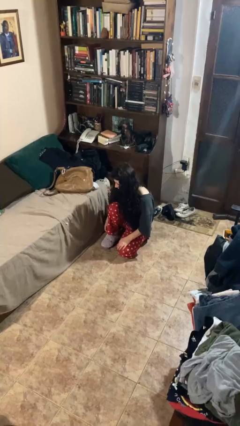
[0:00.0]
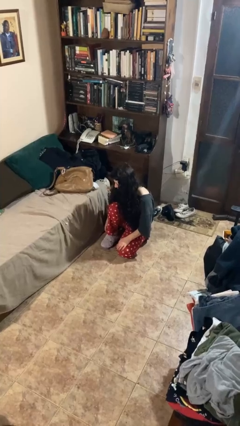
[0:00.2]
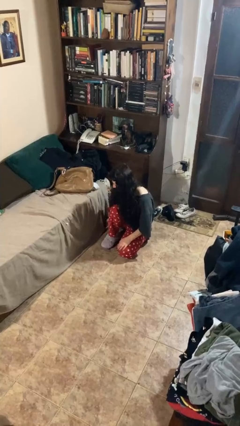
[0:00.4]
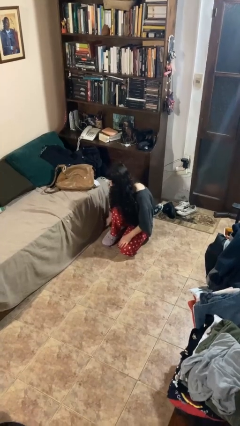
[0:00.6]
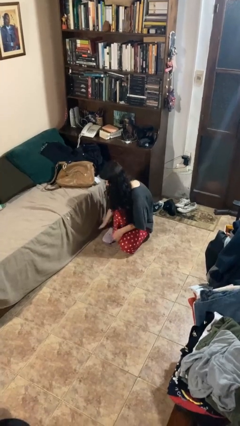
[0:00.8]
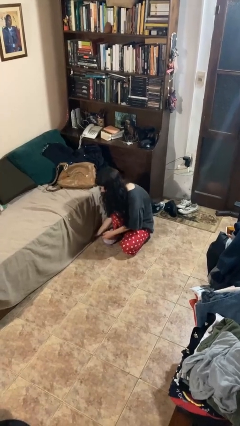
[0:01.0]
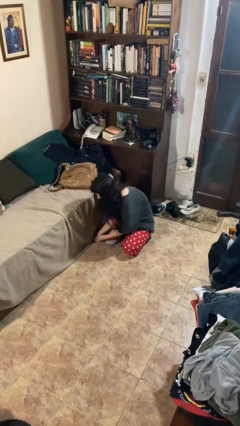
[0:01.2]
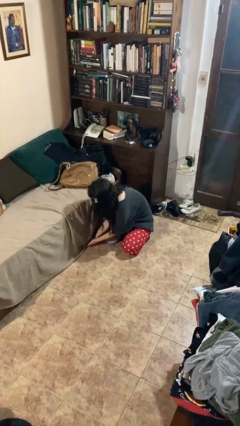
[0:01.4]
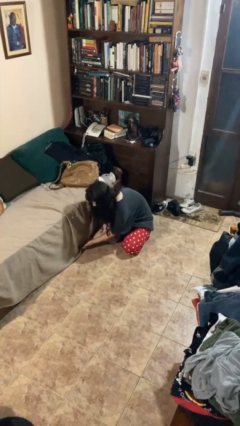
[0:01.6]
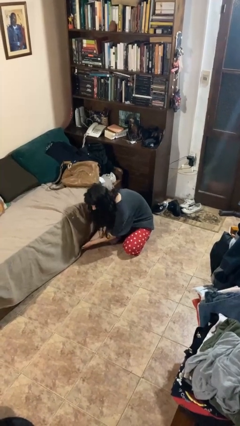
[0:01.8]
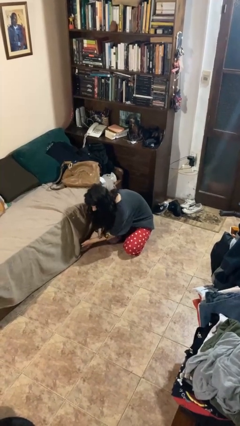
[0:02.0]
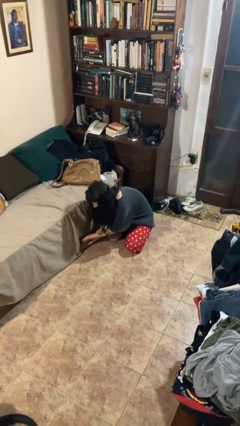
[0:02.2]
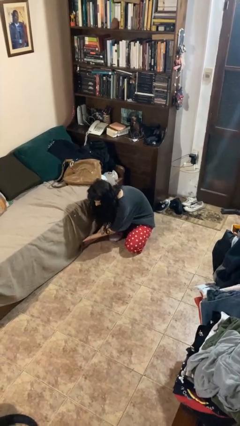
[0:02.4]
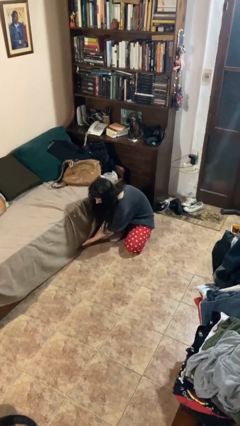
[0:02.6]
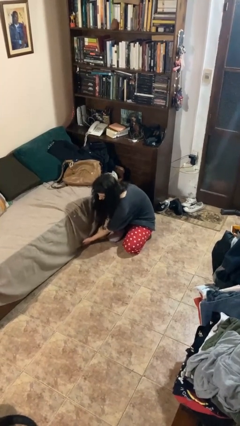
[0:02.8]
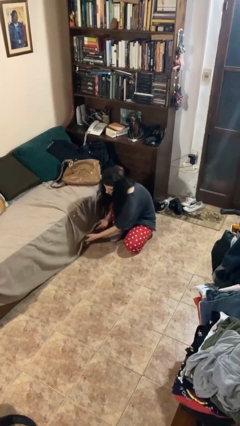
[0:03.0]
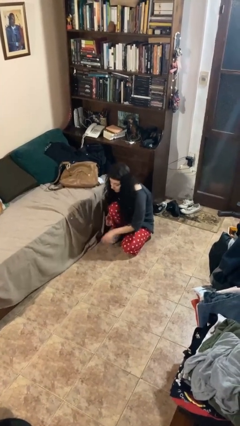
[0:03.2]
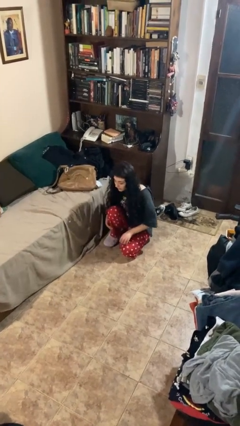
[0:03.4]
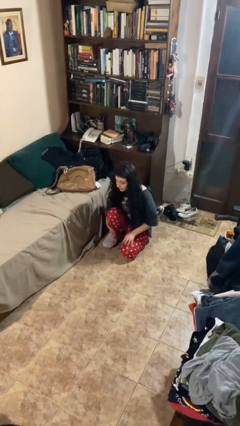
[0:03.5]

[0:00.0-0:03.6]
person searches under couch

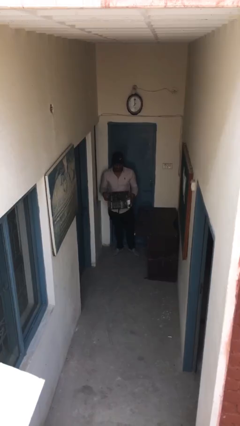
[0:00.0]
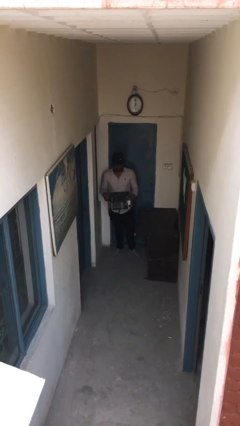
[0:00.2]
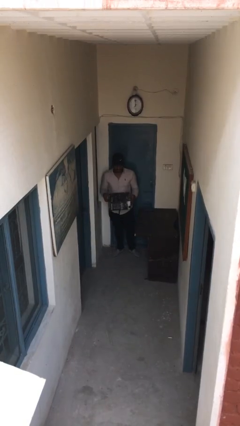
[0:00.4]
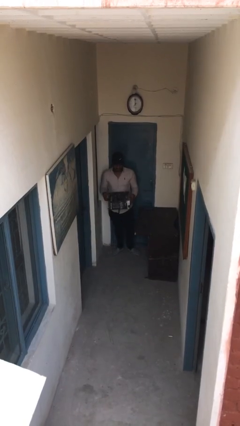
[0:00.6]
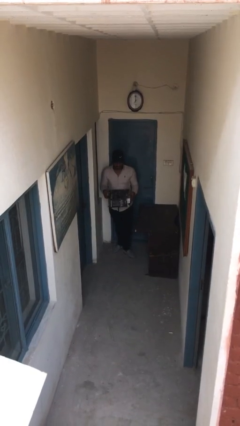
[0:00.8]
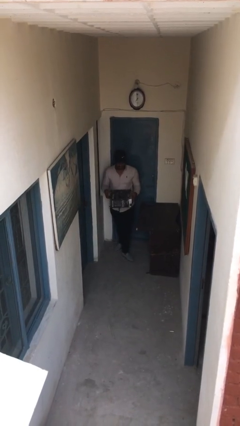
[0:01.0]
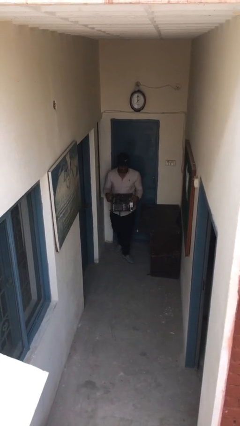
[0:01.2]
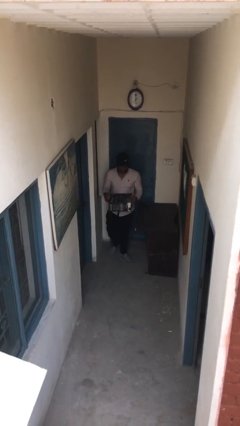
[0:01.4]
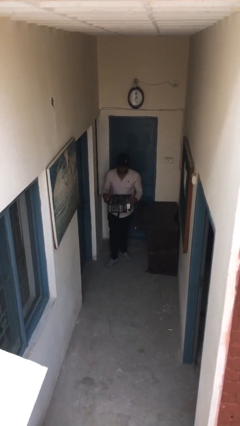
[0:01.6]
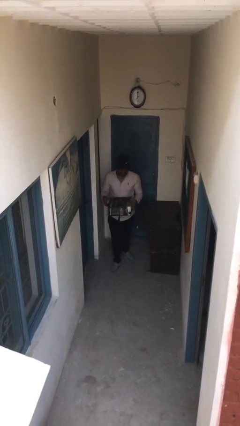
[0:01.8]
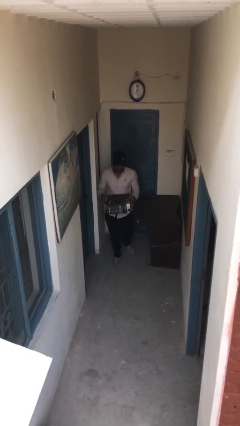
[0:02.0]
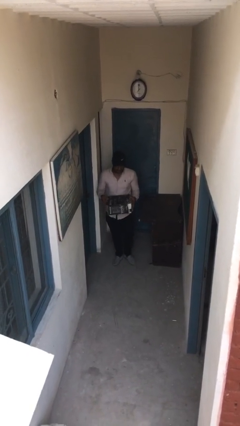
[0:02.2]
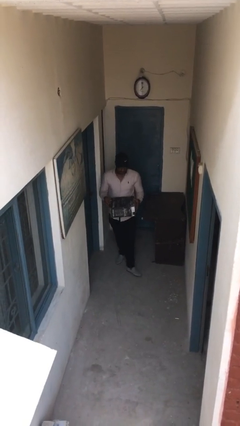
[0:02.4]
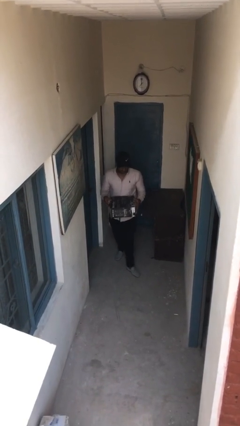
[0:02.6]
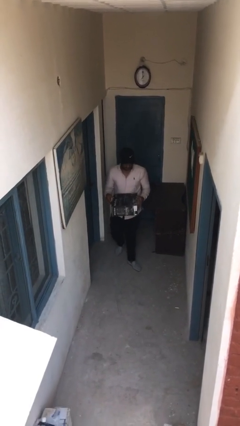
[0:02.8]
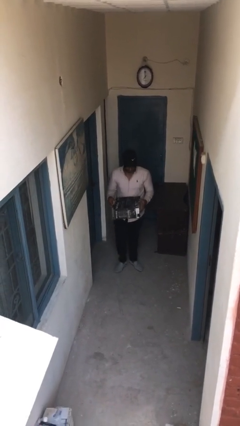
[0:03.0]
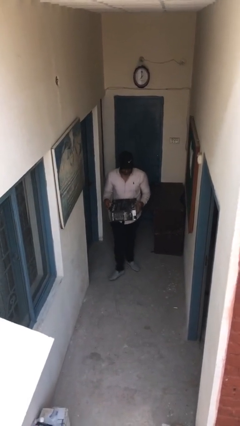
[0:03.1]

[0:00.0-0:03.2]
person carries heavy object

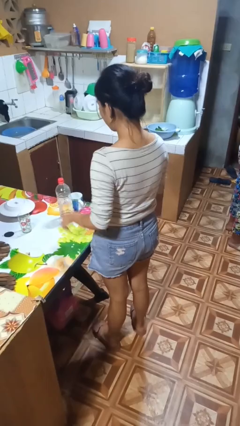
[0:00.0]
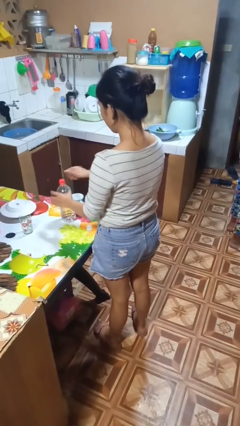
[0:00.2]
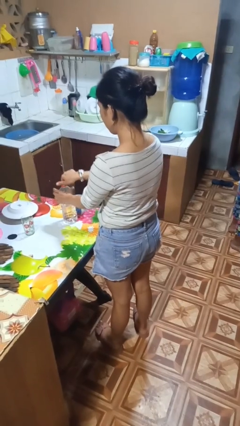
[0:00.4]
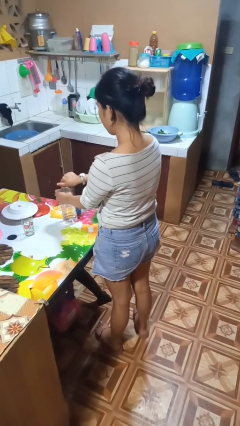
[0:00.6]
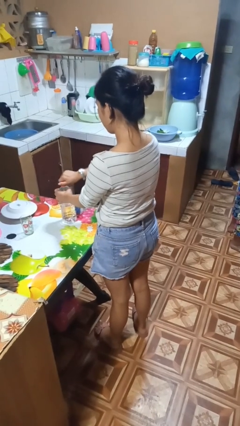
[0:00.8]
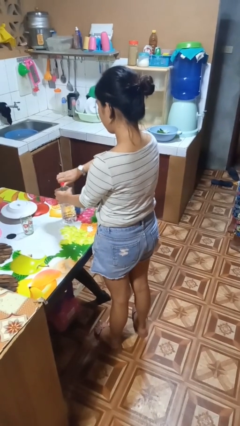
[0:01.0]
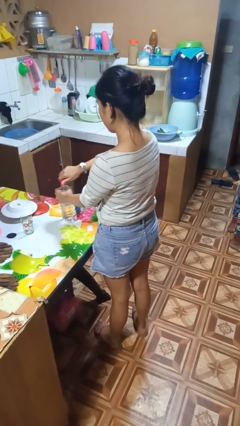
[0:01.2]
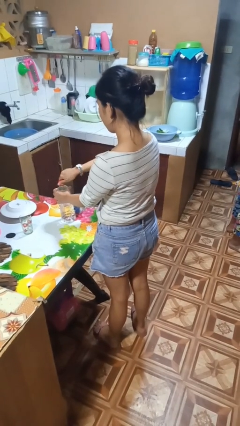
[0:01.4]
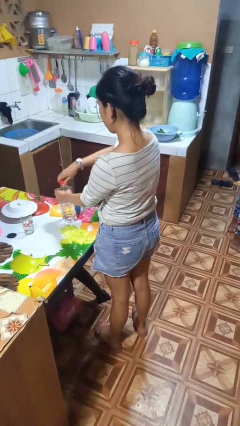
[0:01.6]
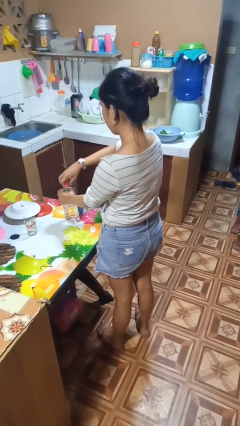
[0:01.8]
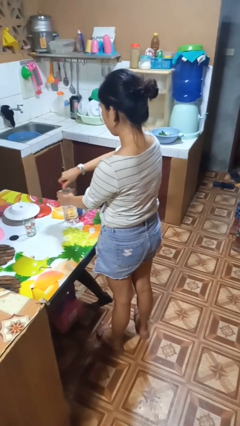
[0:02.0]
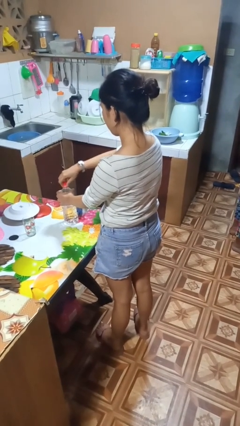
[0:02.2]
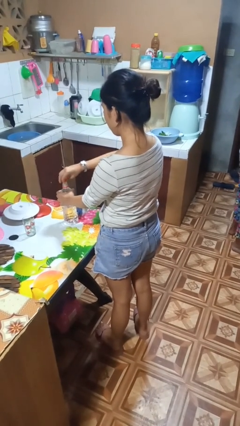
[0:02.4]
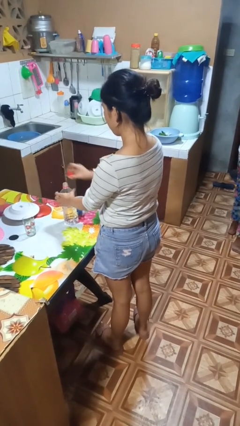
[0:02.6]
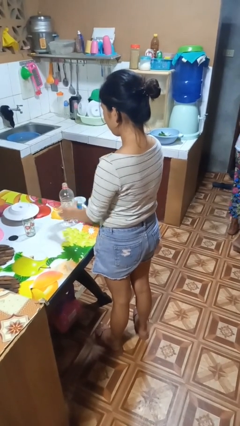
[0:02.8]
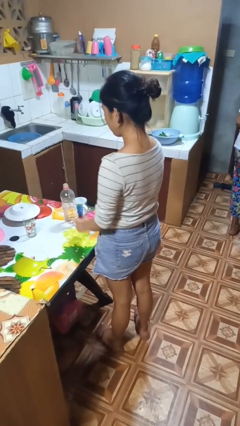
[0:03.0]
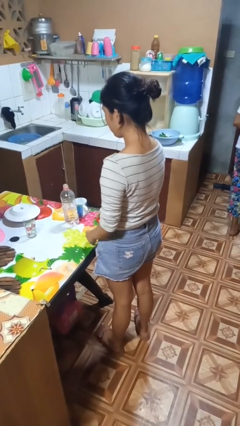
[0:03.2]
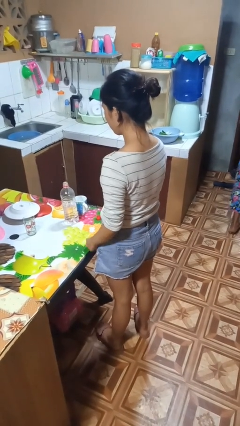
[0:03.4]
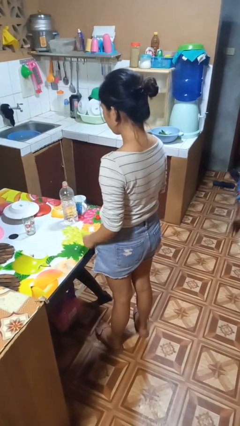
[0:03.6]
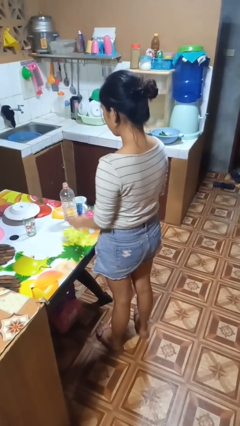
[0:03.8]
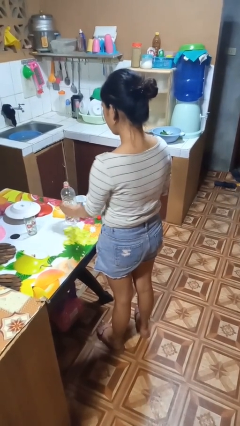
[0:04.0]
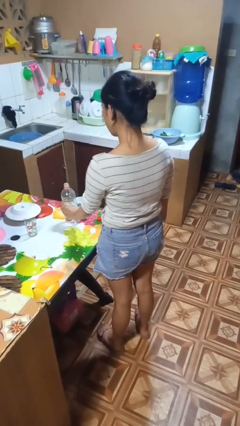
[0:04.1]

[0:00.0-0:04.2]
person unscrews lid from bottle

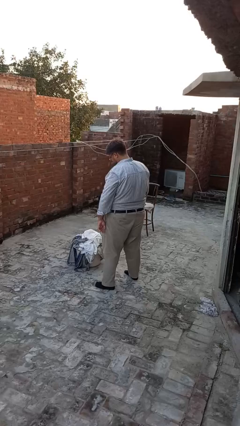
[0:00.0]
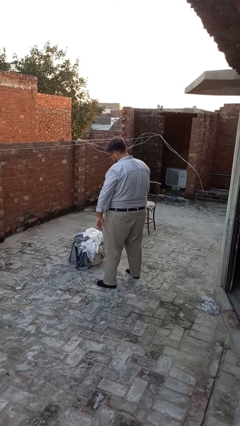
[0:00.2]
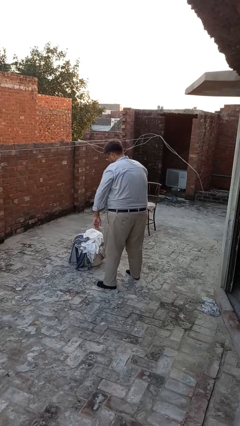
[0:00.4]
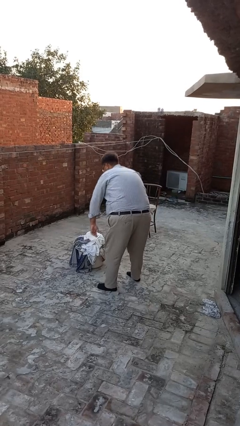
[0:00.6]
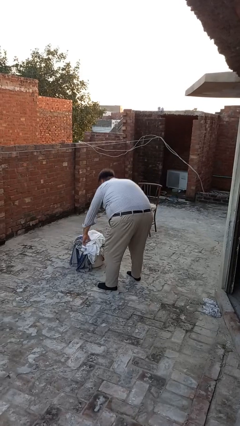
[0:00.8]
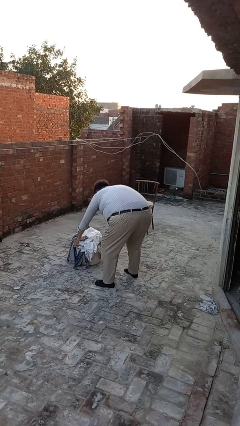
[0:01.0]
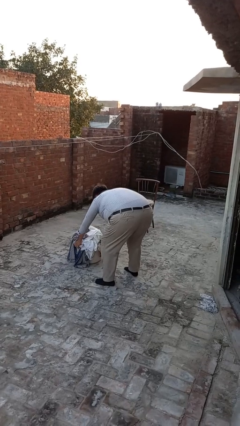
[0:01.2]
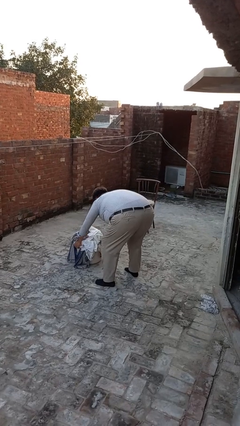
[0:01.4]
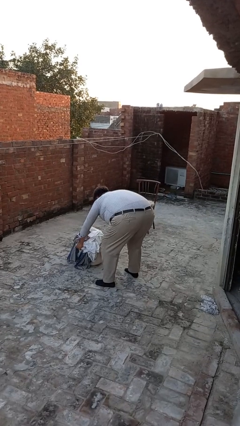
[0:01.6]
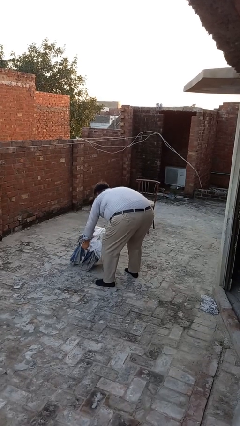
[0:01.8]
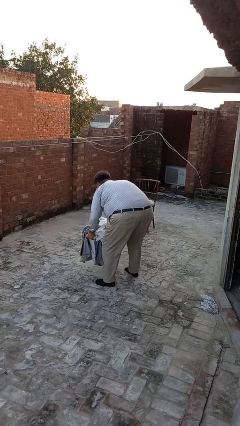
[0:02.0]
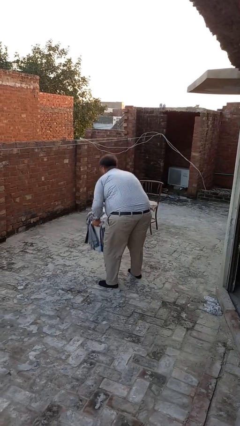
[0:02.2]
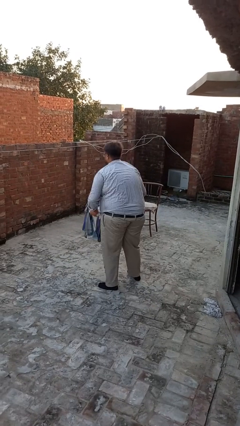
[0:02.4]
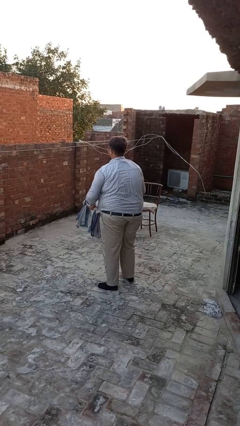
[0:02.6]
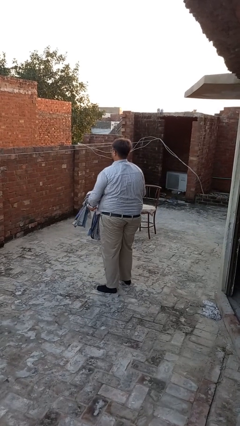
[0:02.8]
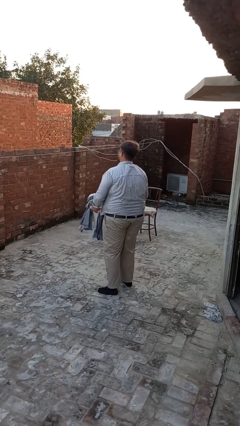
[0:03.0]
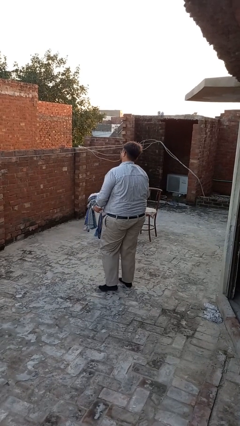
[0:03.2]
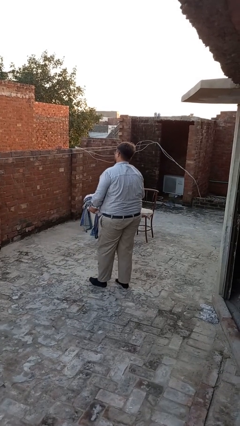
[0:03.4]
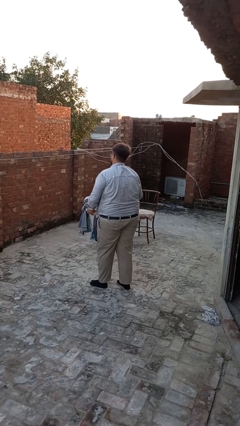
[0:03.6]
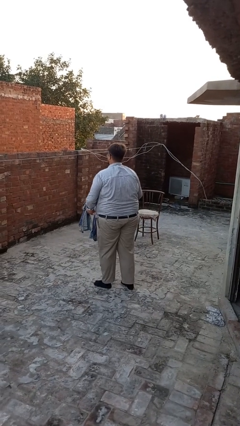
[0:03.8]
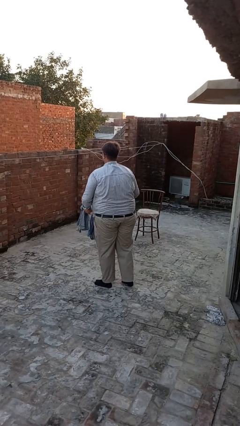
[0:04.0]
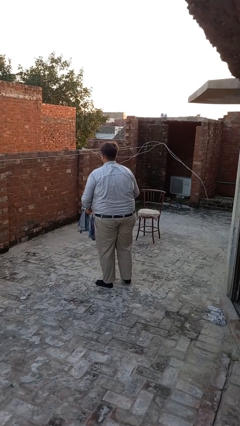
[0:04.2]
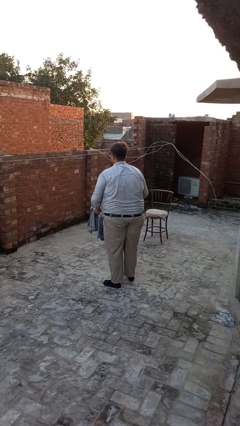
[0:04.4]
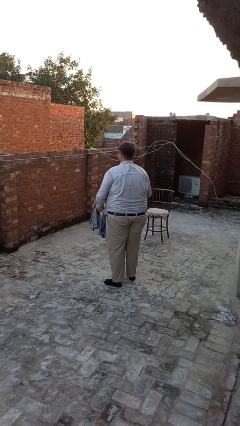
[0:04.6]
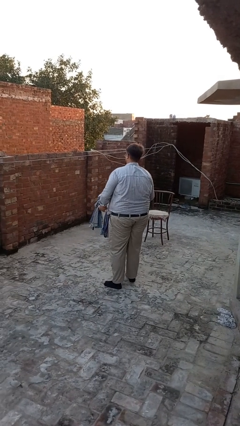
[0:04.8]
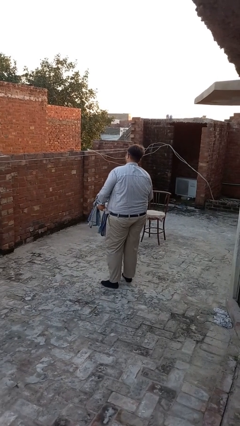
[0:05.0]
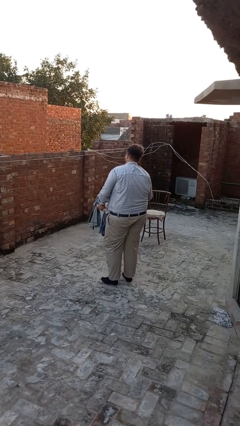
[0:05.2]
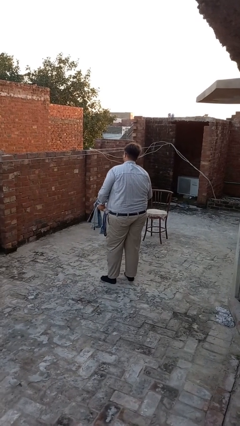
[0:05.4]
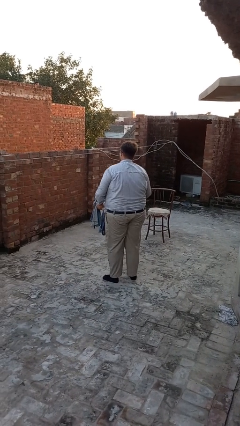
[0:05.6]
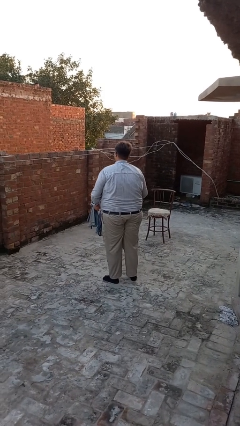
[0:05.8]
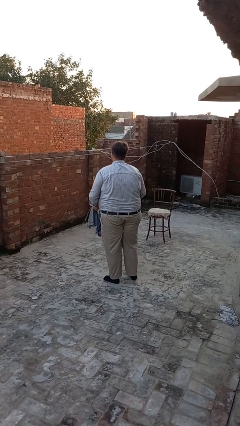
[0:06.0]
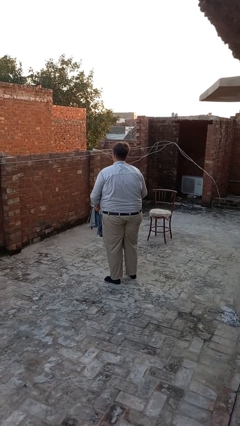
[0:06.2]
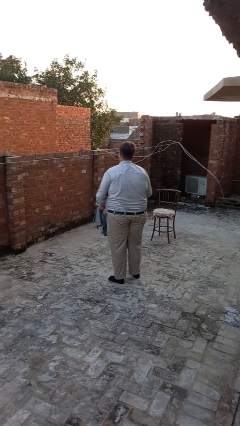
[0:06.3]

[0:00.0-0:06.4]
person carries laundry basket

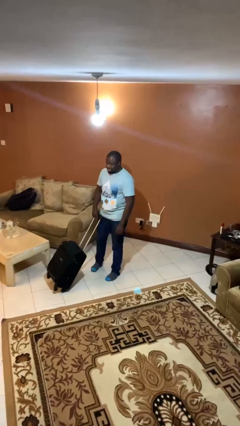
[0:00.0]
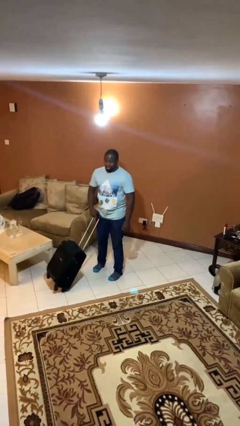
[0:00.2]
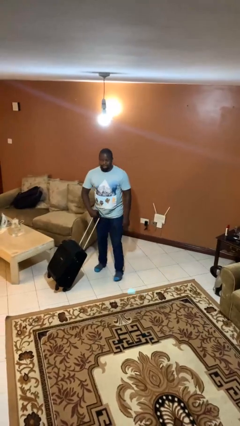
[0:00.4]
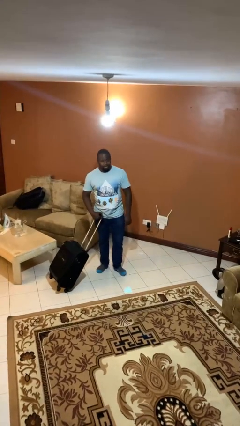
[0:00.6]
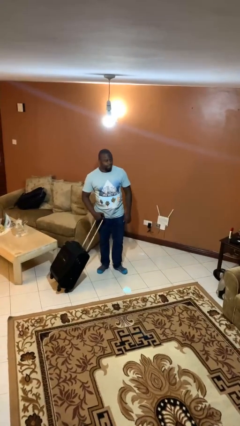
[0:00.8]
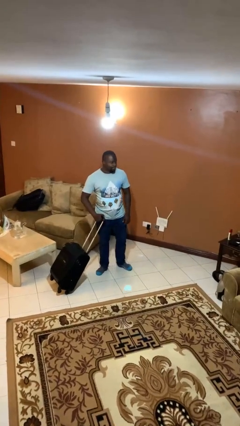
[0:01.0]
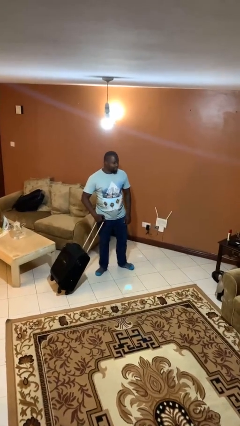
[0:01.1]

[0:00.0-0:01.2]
person pulls wheeled cart
